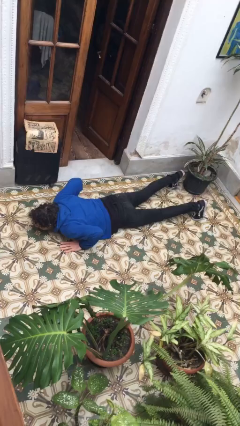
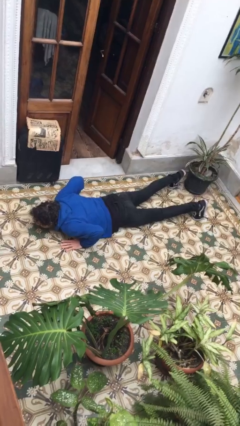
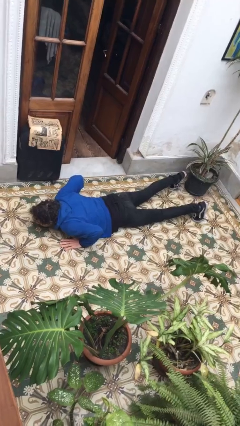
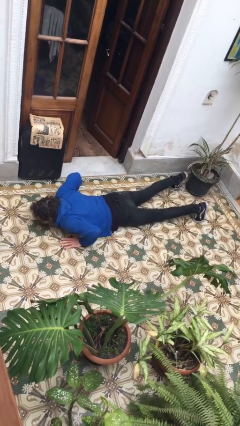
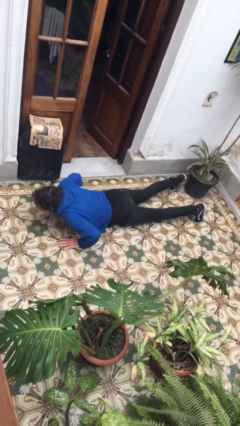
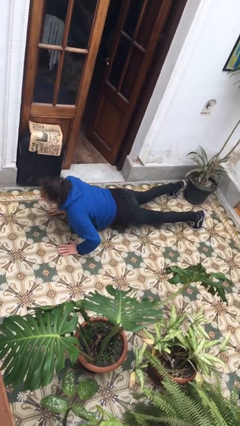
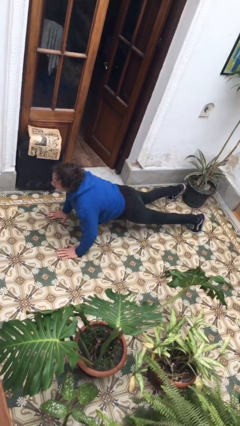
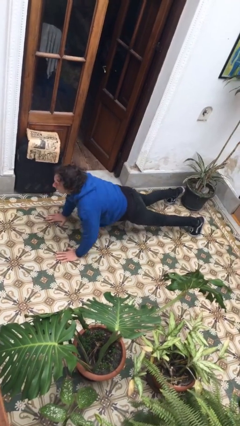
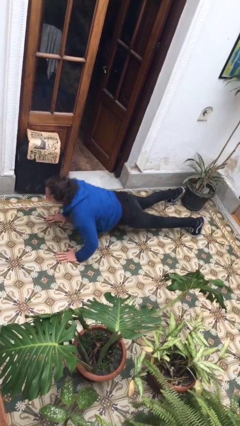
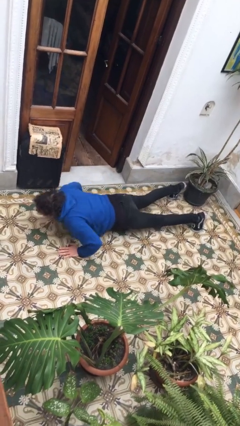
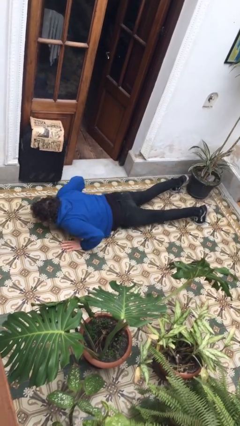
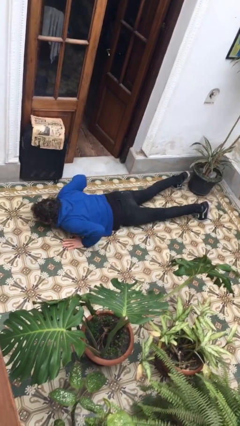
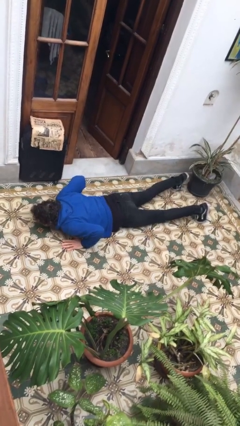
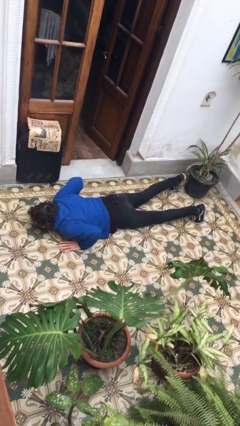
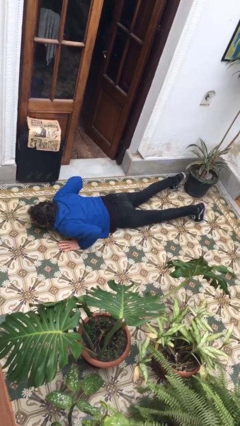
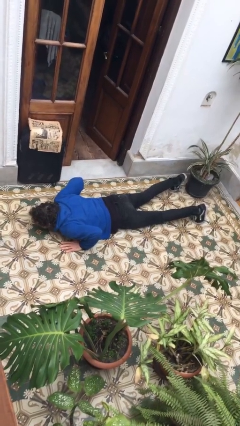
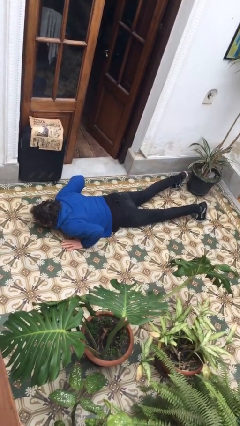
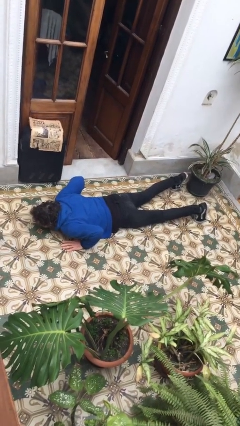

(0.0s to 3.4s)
person exercises with pushup

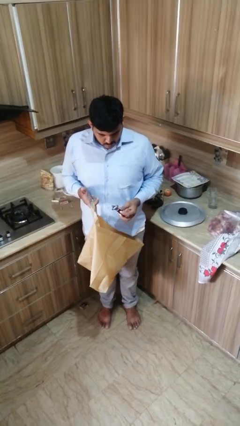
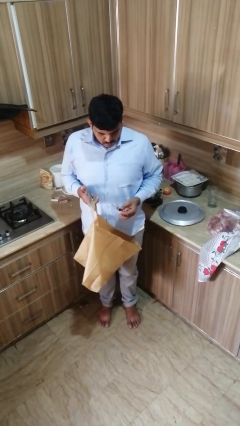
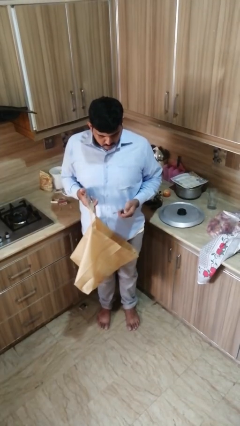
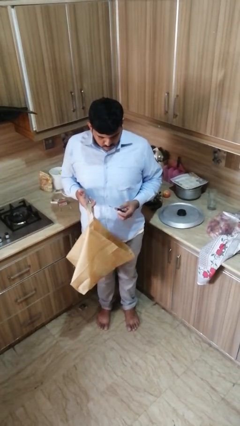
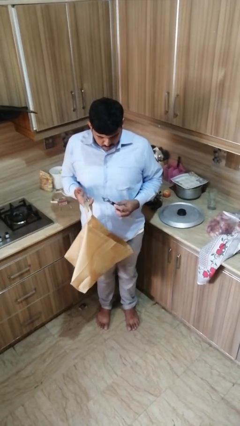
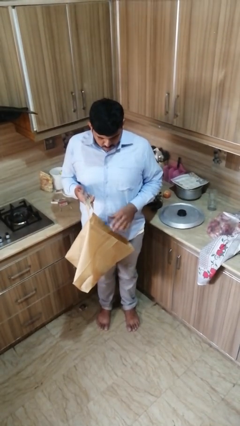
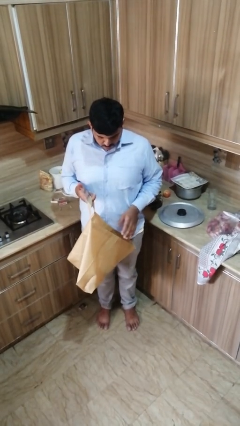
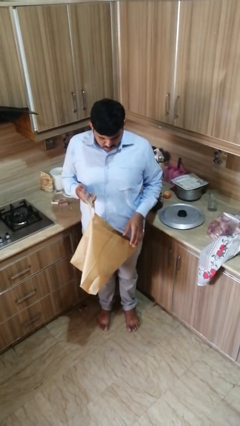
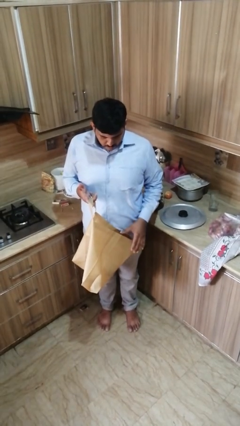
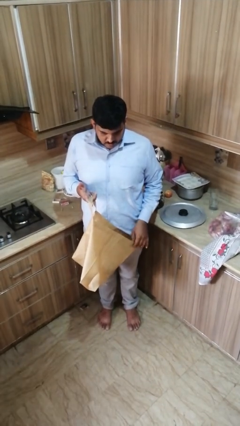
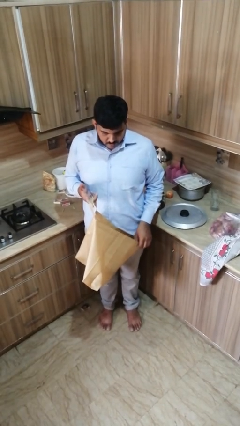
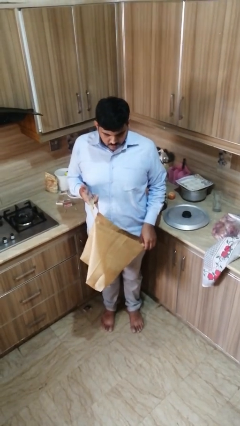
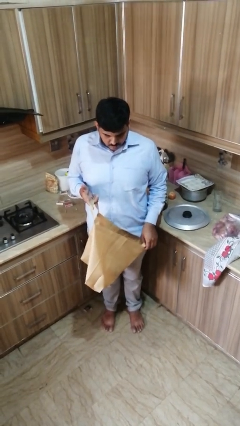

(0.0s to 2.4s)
person puts object into bag

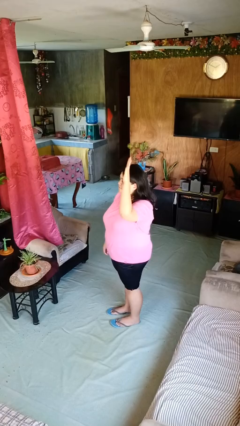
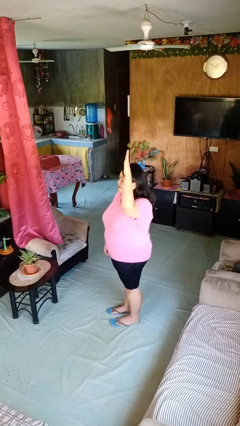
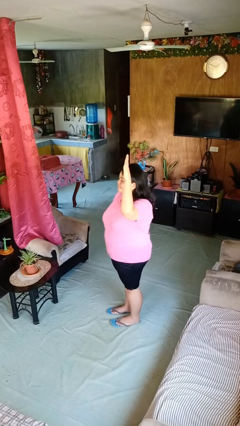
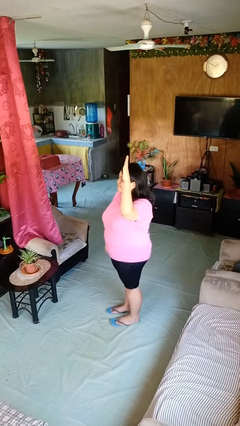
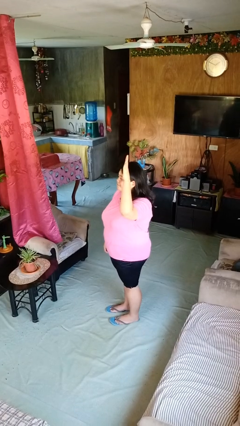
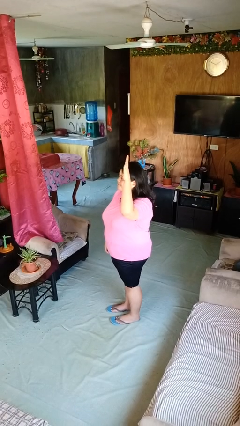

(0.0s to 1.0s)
person gestures raise hand

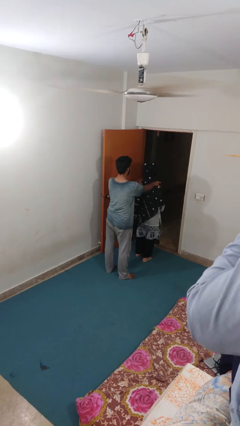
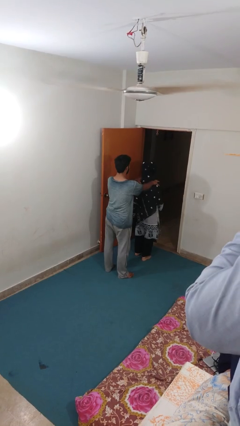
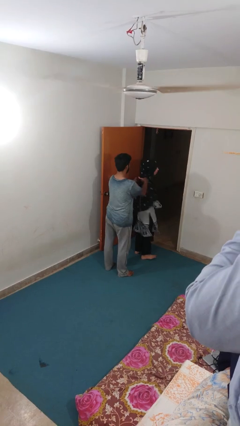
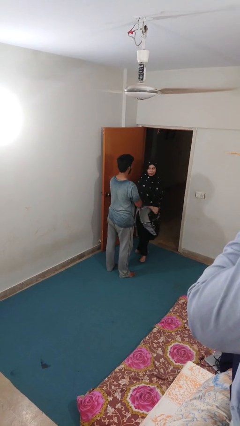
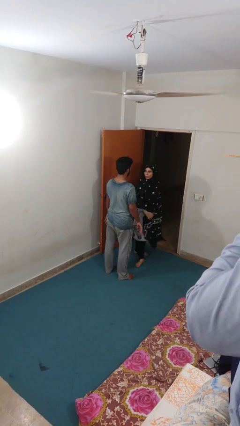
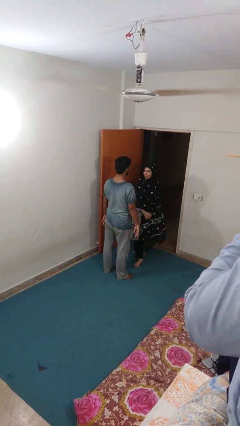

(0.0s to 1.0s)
person spins person around

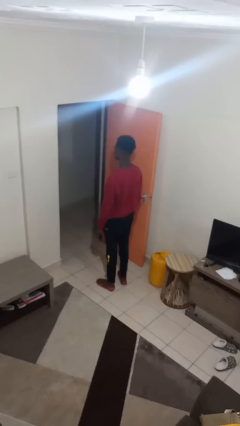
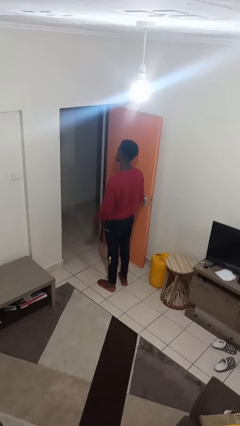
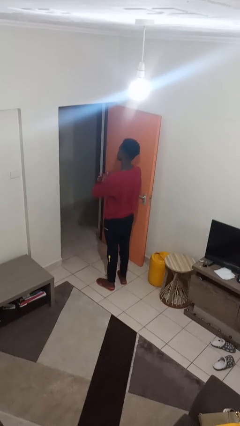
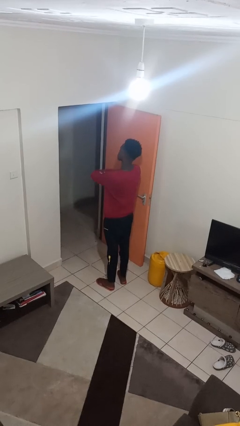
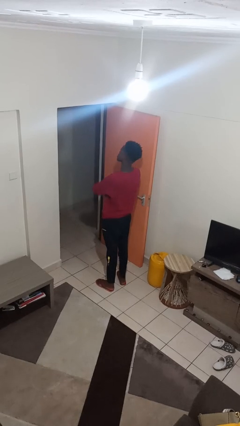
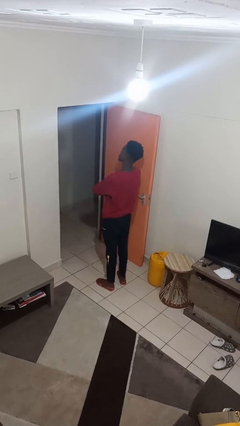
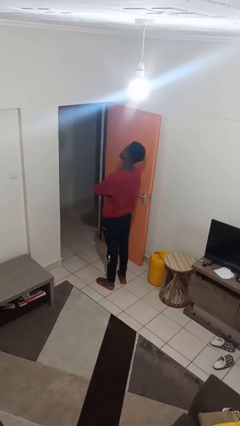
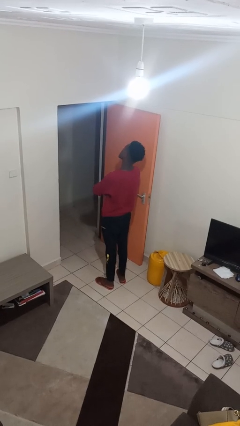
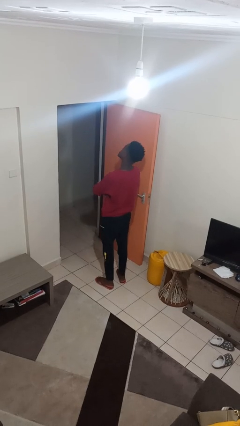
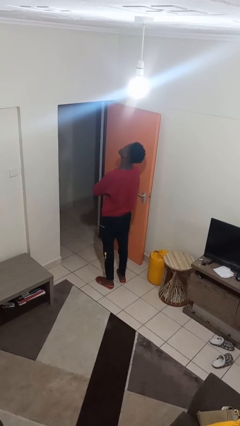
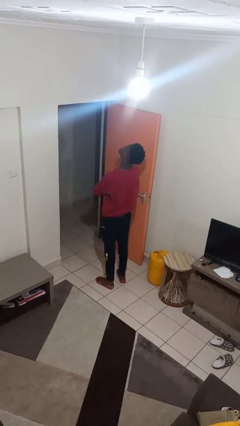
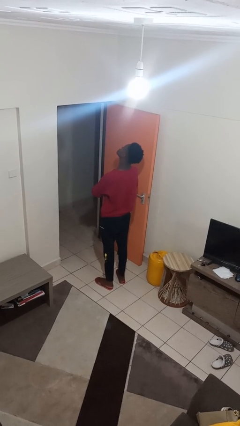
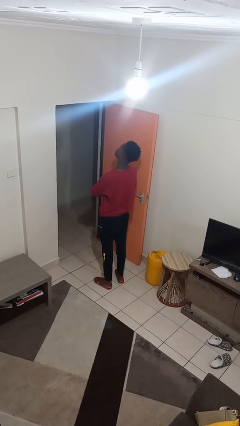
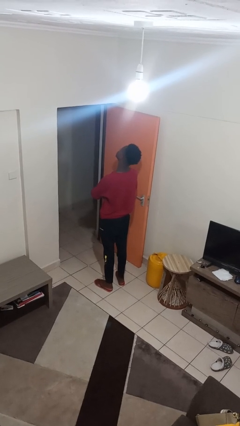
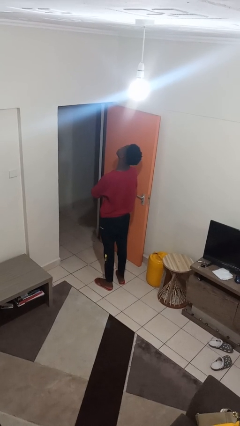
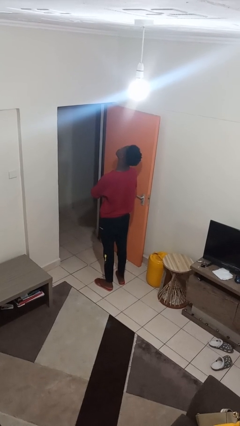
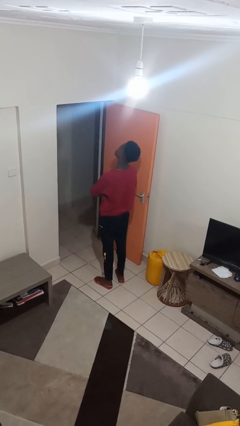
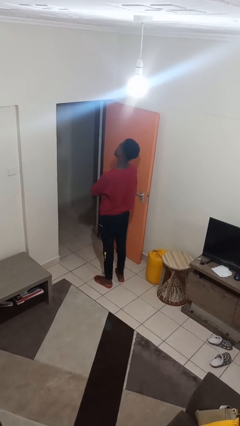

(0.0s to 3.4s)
person crosses arms

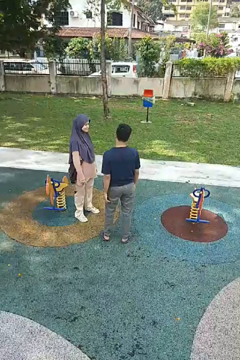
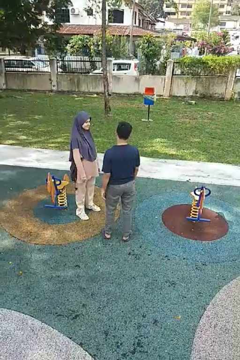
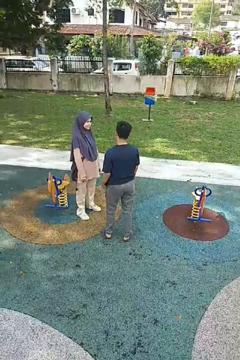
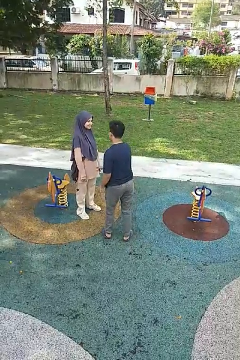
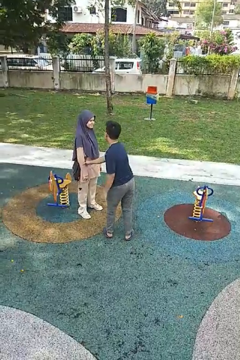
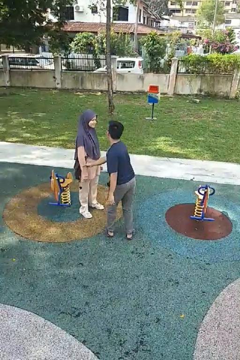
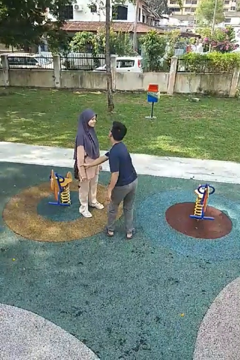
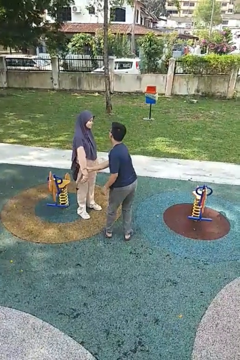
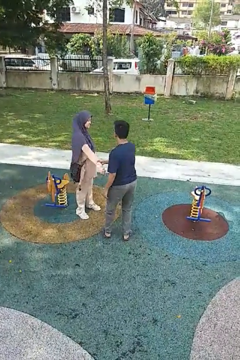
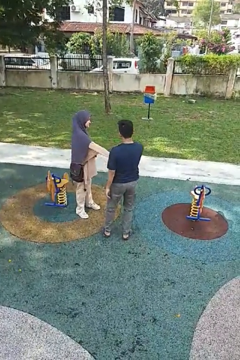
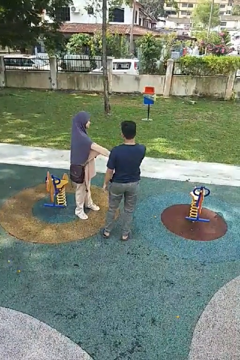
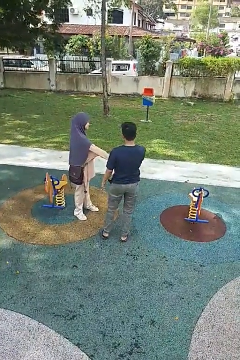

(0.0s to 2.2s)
person grabs person by forearm

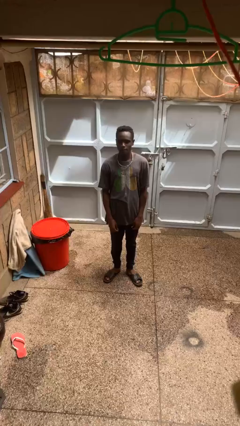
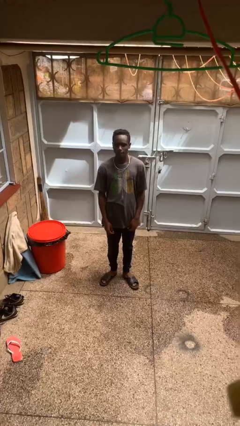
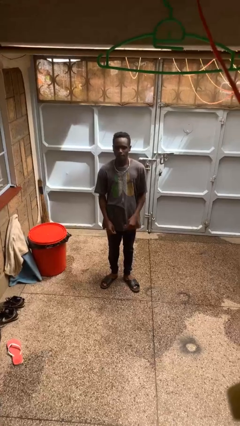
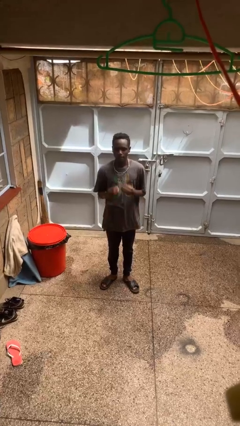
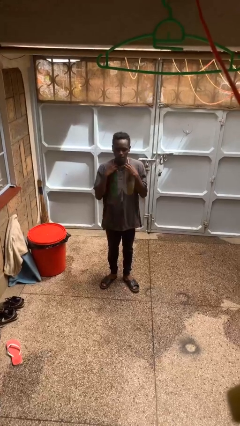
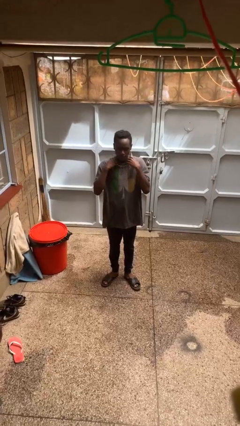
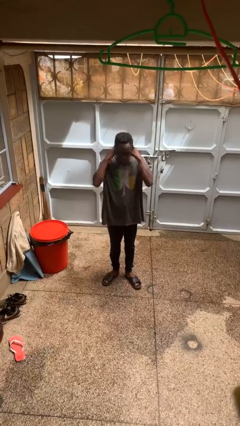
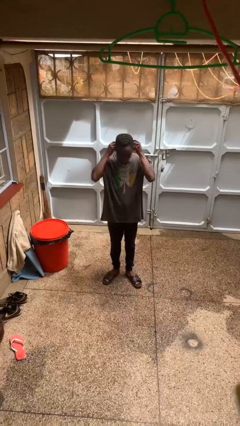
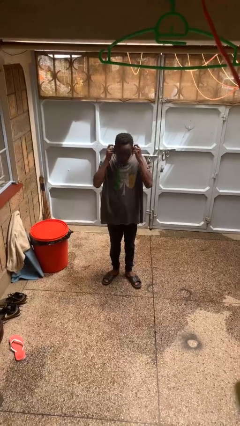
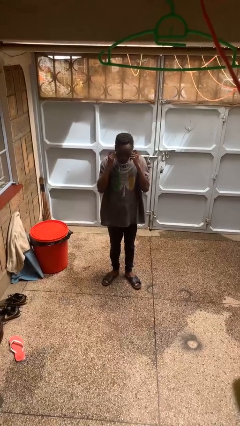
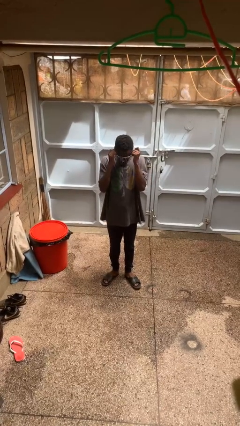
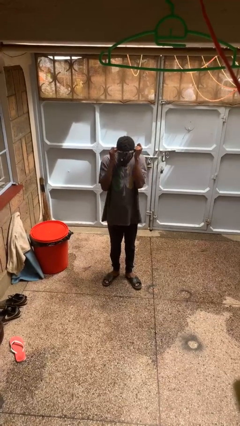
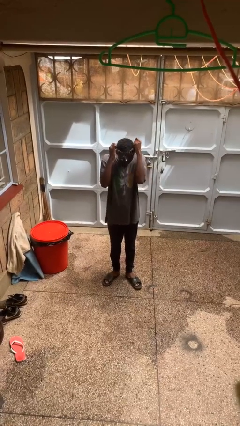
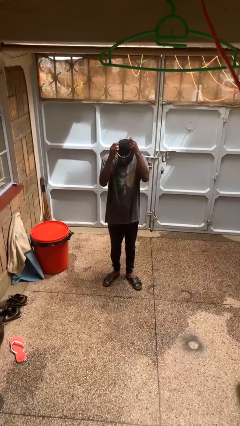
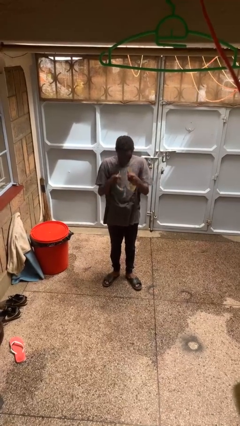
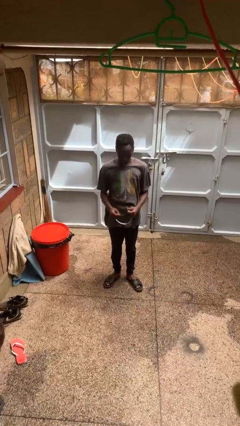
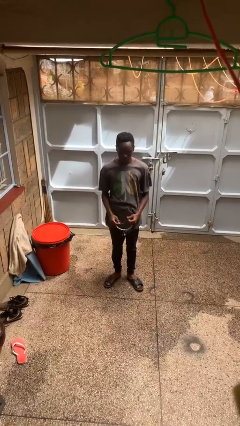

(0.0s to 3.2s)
person takes off necklace

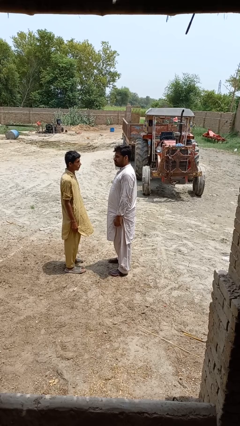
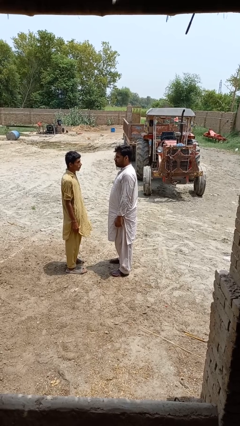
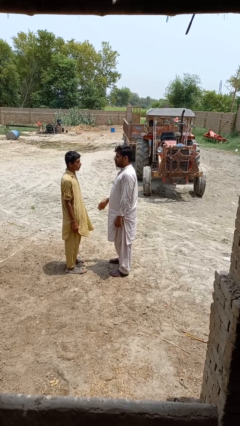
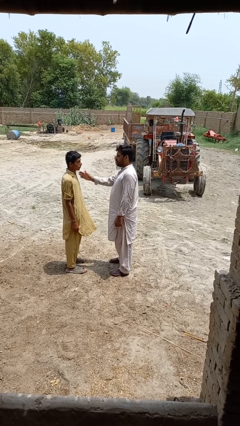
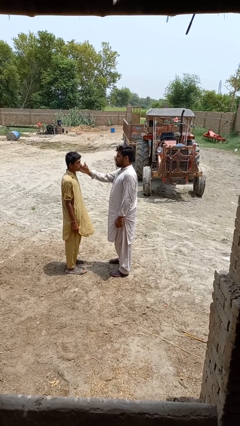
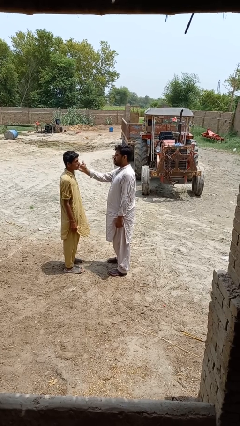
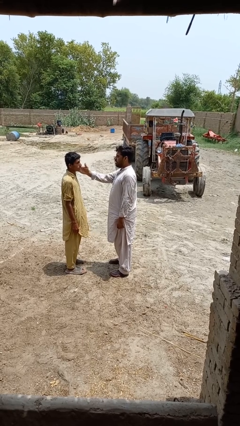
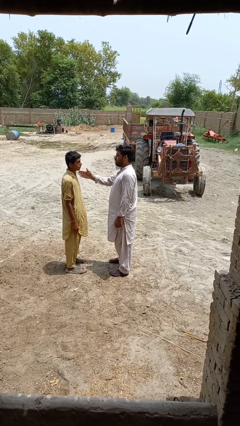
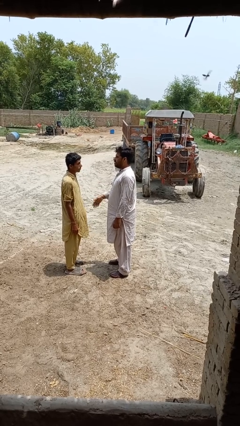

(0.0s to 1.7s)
person touches face of person
